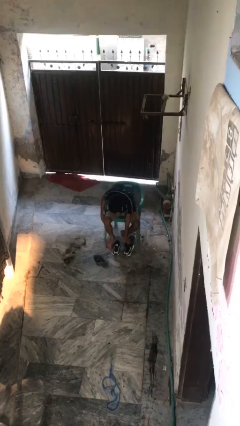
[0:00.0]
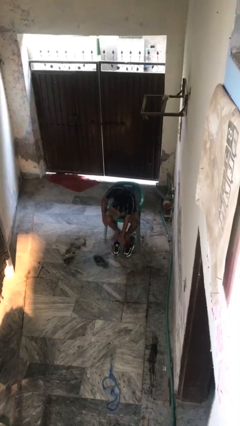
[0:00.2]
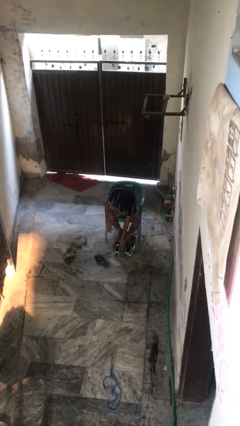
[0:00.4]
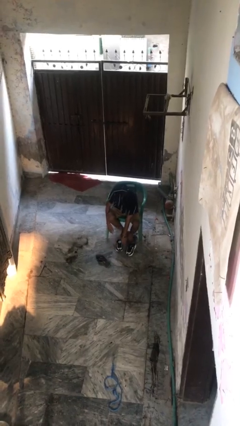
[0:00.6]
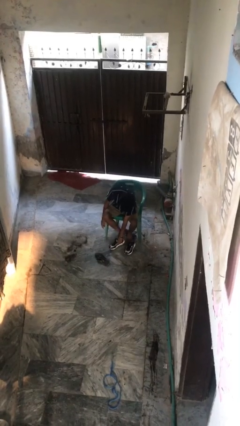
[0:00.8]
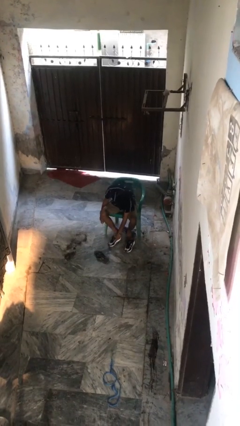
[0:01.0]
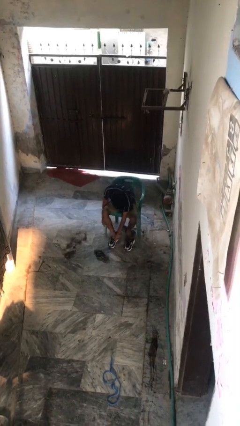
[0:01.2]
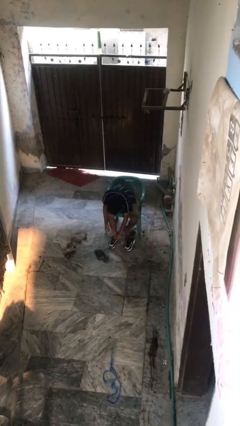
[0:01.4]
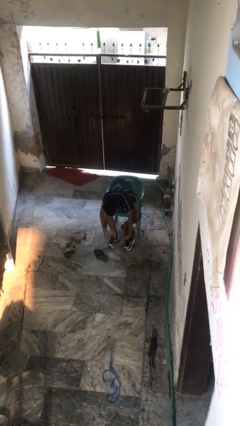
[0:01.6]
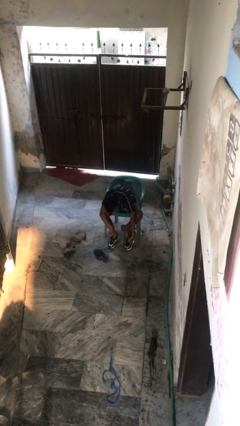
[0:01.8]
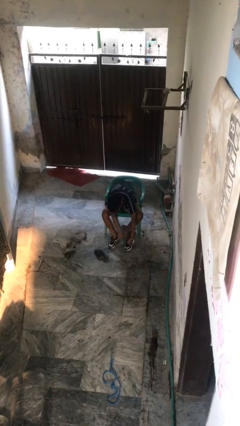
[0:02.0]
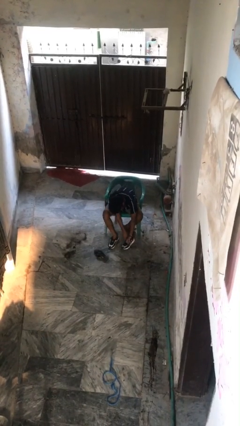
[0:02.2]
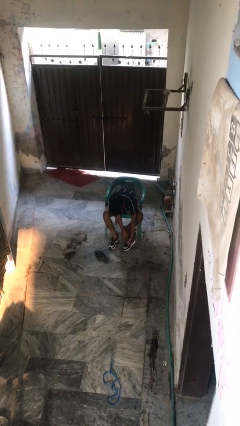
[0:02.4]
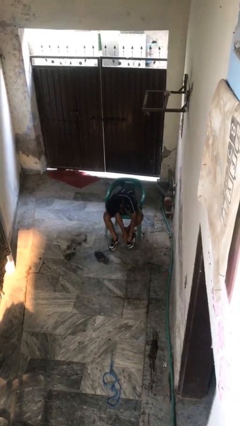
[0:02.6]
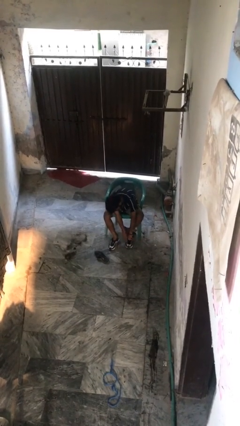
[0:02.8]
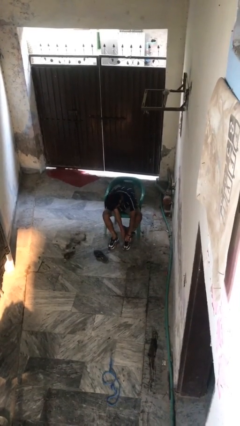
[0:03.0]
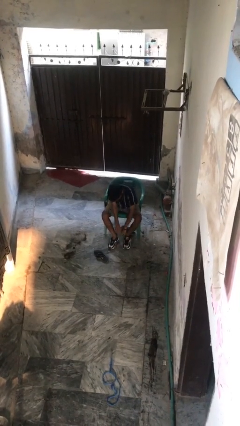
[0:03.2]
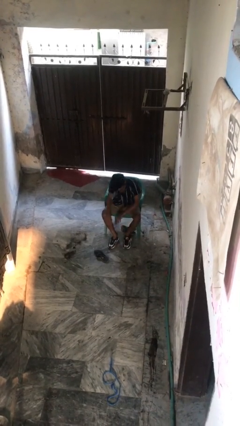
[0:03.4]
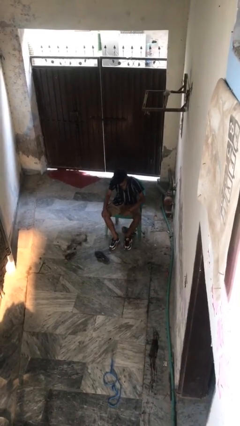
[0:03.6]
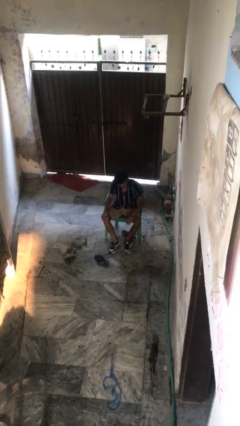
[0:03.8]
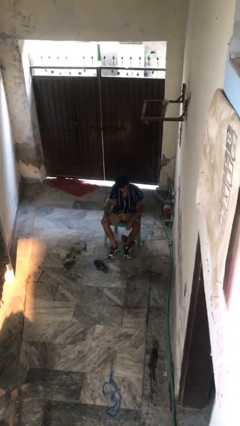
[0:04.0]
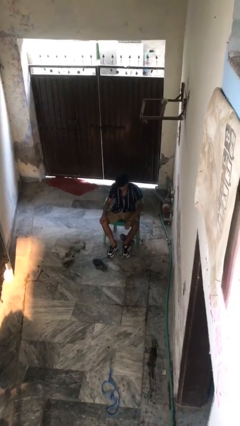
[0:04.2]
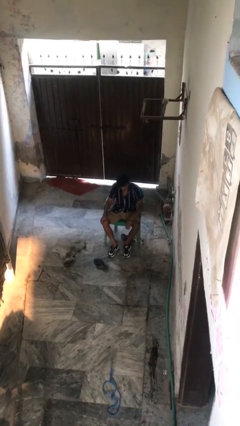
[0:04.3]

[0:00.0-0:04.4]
person puts on shoes

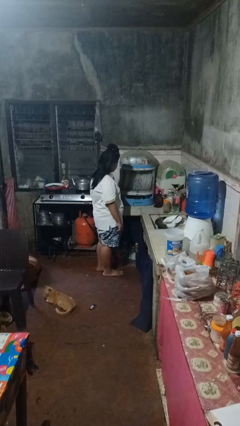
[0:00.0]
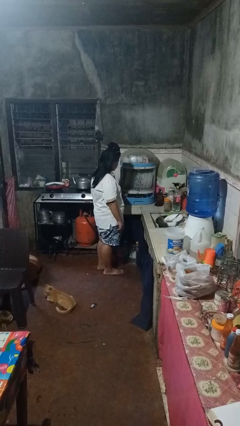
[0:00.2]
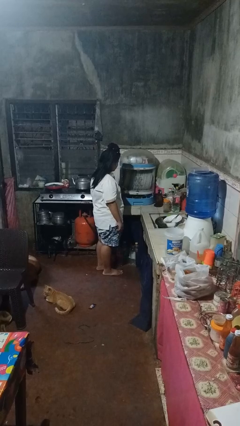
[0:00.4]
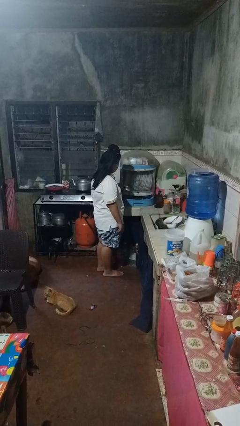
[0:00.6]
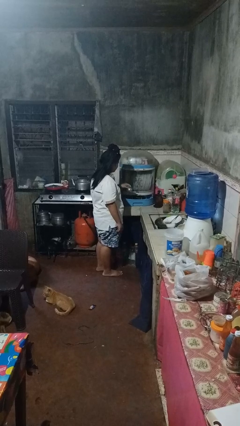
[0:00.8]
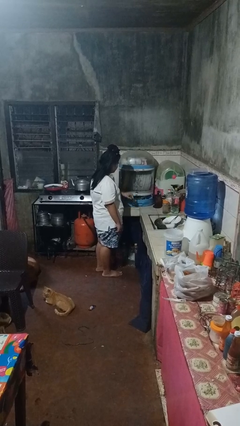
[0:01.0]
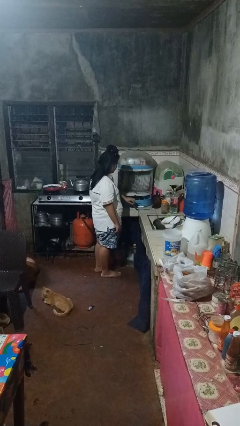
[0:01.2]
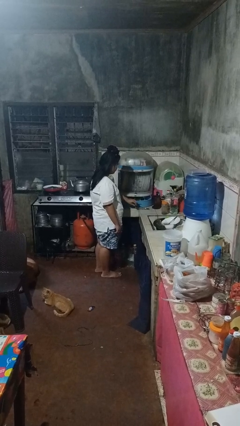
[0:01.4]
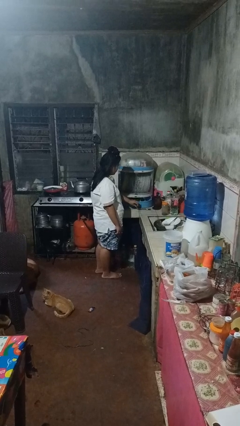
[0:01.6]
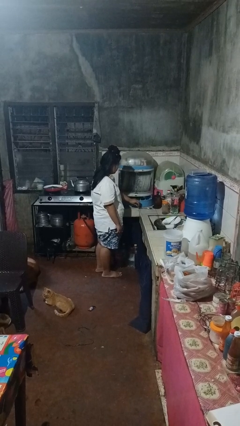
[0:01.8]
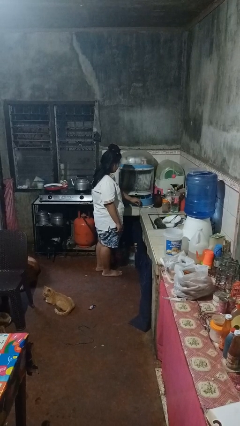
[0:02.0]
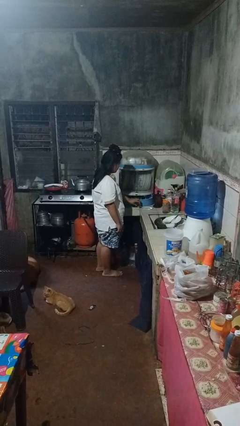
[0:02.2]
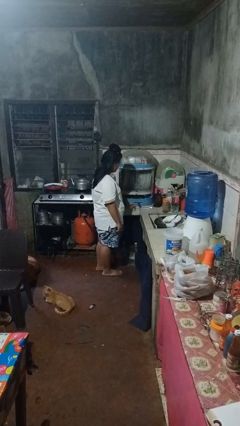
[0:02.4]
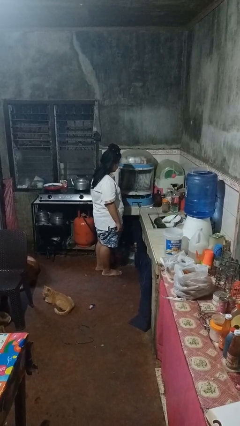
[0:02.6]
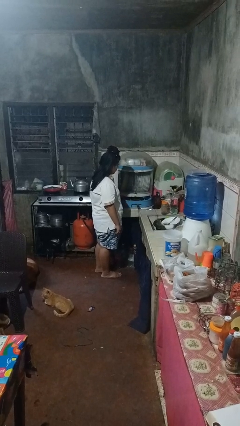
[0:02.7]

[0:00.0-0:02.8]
person takes object from kitchen drawer

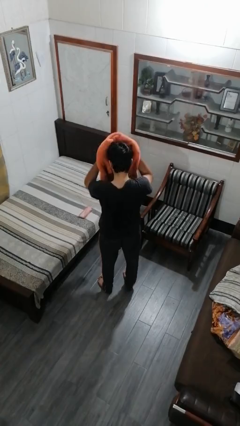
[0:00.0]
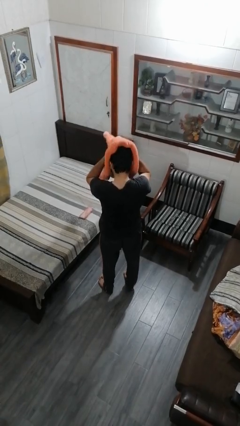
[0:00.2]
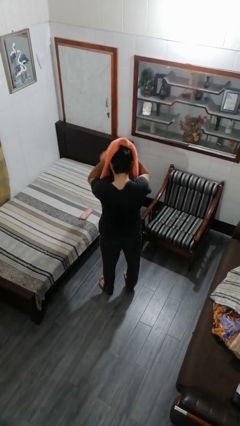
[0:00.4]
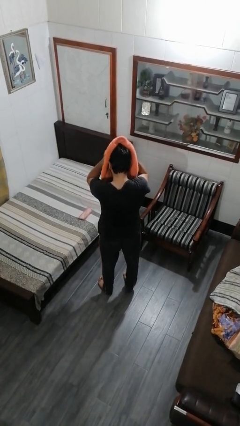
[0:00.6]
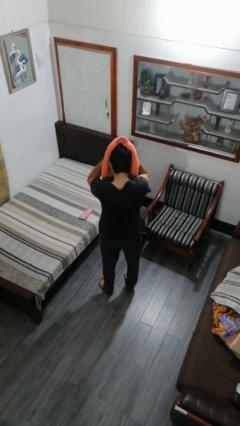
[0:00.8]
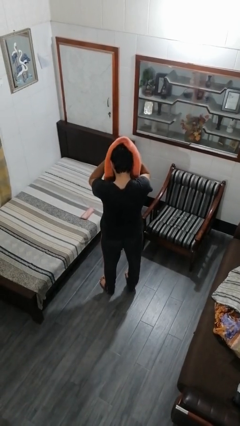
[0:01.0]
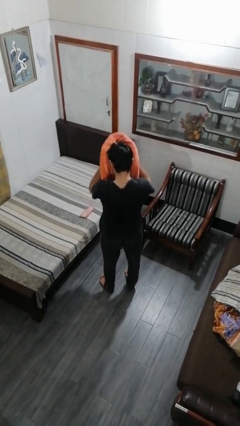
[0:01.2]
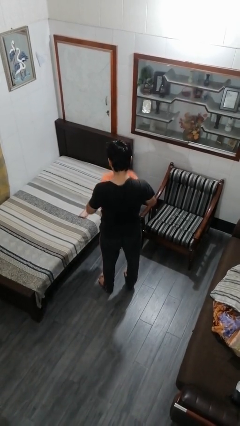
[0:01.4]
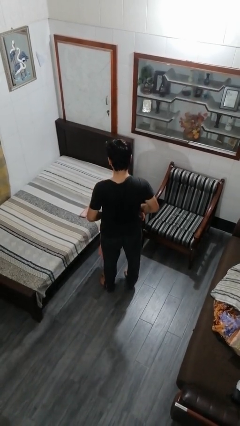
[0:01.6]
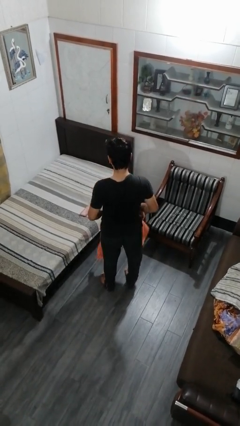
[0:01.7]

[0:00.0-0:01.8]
person dries hair with towel

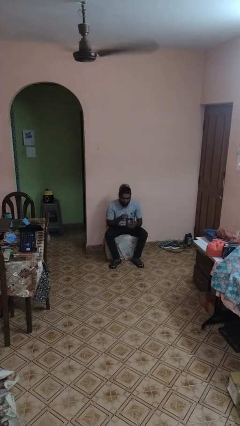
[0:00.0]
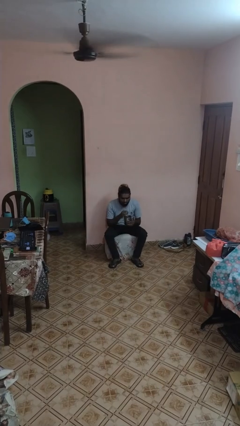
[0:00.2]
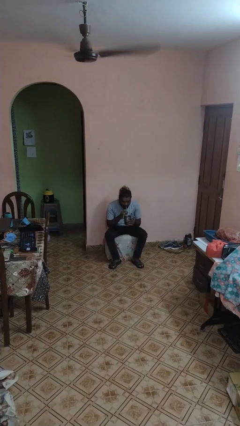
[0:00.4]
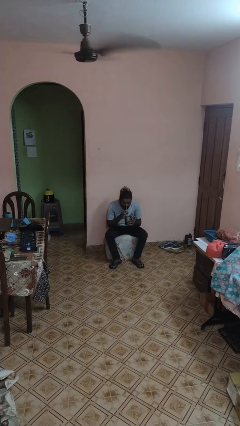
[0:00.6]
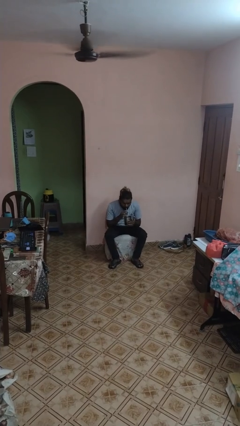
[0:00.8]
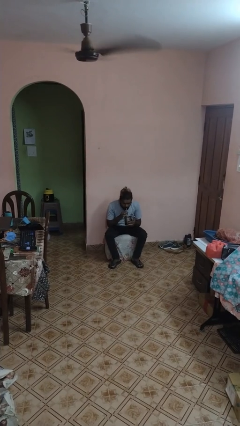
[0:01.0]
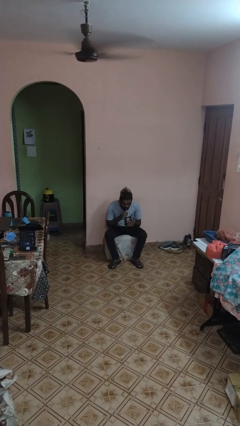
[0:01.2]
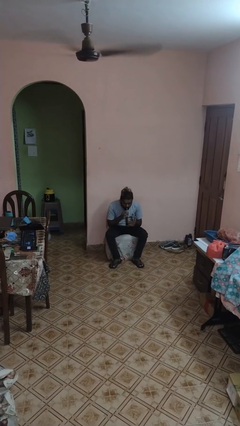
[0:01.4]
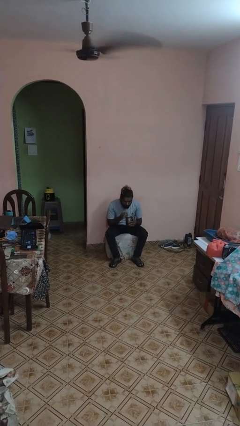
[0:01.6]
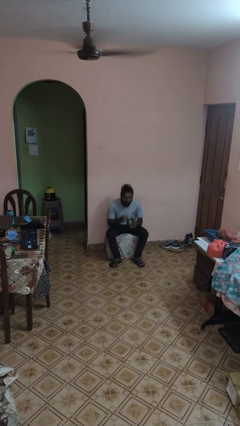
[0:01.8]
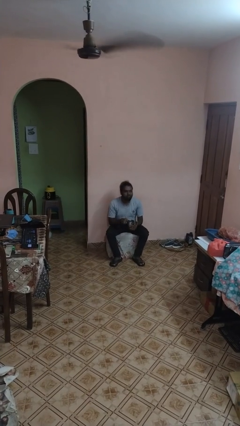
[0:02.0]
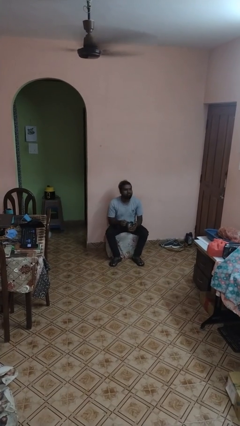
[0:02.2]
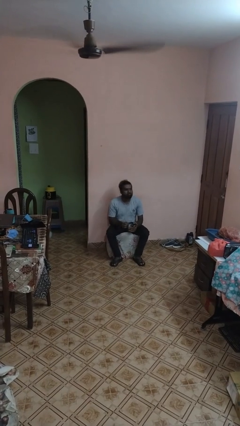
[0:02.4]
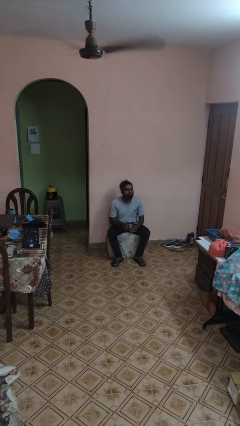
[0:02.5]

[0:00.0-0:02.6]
person drinks from straw

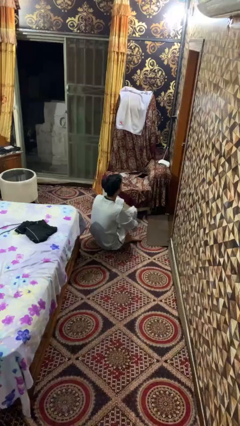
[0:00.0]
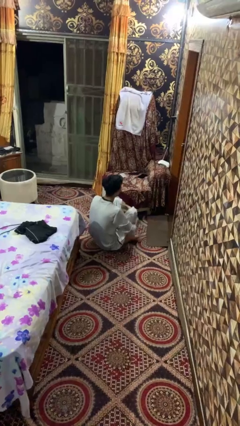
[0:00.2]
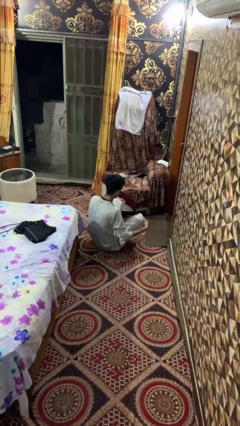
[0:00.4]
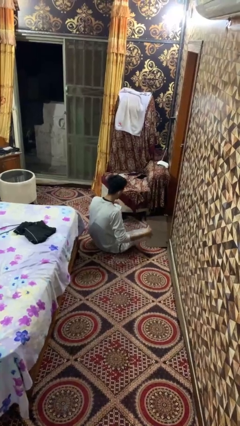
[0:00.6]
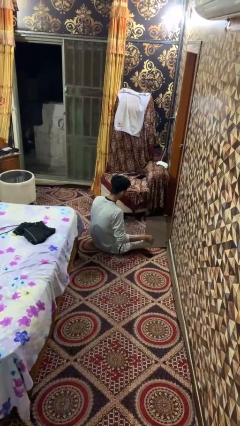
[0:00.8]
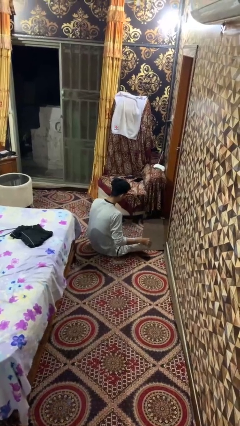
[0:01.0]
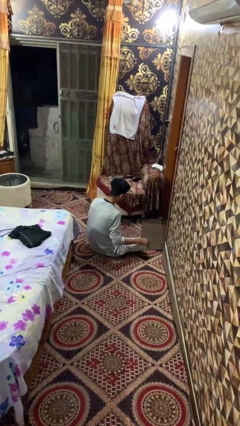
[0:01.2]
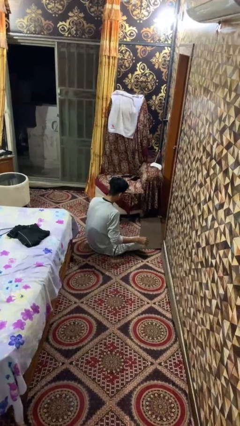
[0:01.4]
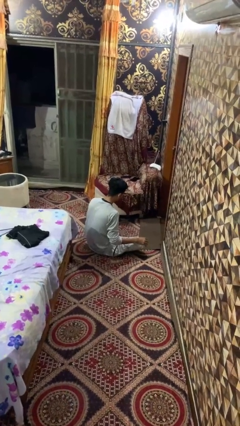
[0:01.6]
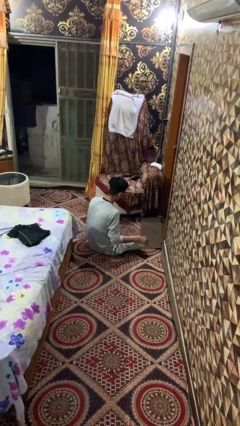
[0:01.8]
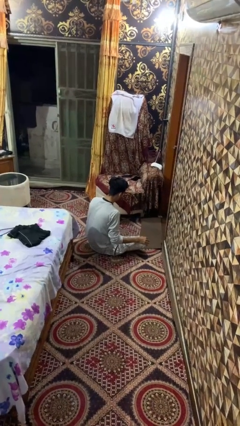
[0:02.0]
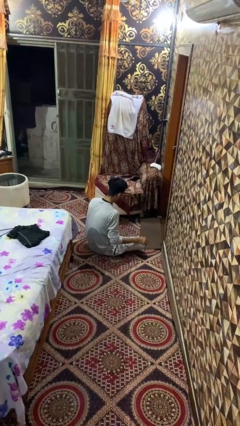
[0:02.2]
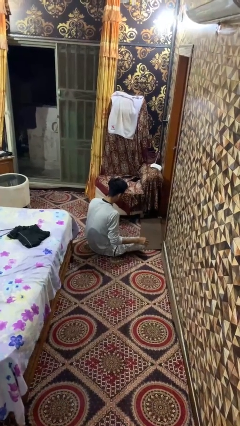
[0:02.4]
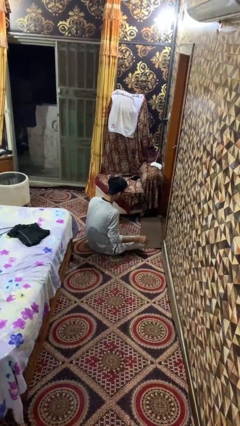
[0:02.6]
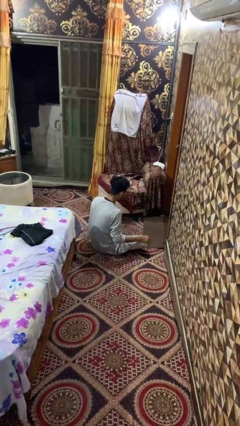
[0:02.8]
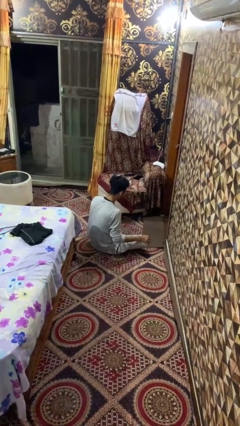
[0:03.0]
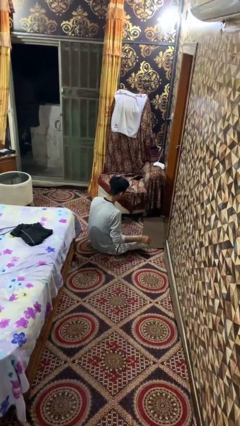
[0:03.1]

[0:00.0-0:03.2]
person crosses legs

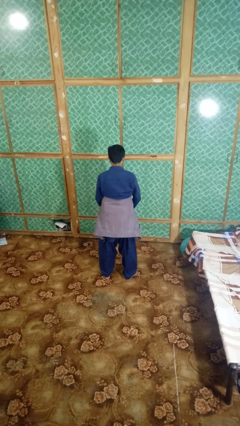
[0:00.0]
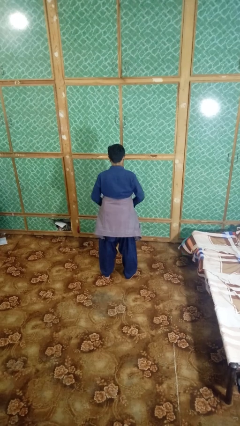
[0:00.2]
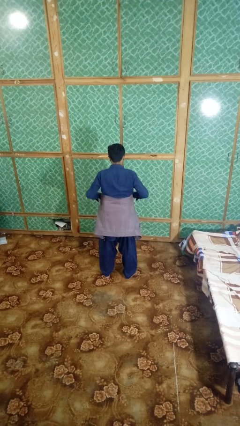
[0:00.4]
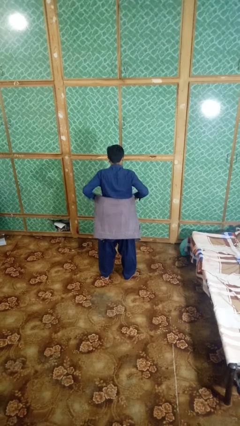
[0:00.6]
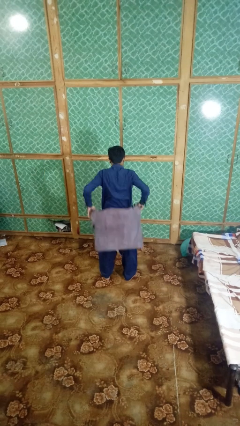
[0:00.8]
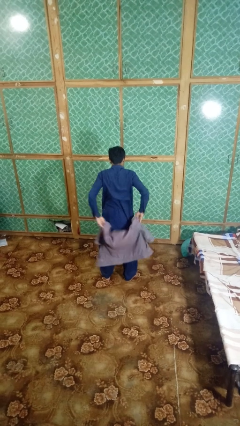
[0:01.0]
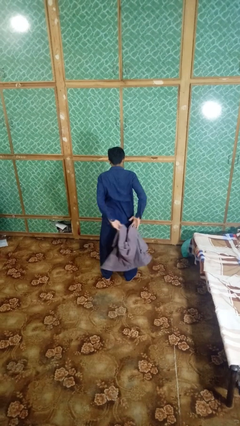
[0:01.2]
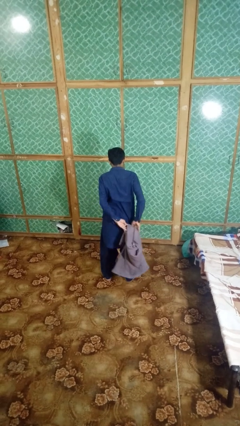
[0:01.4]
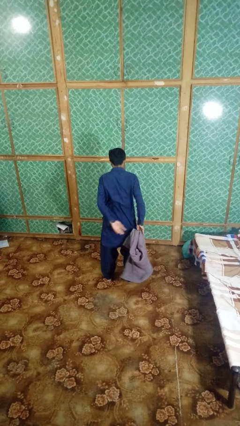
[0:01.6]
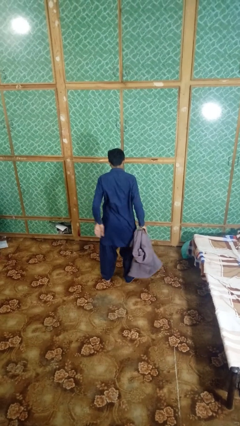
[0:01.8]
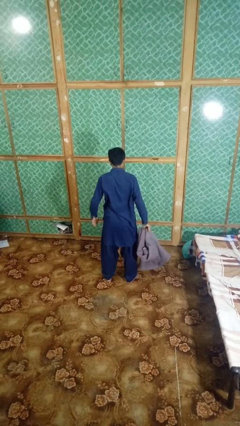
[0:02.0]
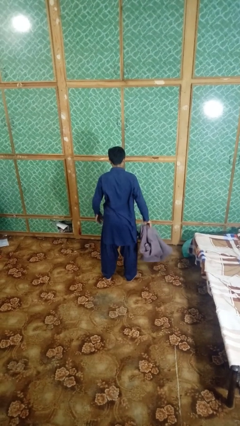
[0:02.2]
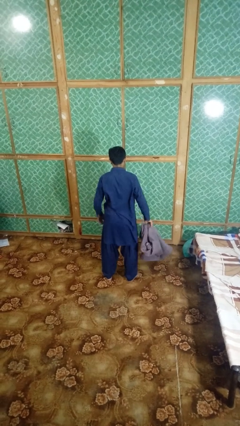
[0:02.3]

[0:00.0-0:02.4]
person unties jacket around waist
